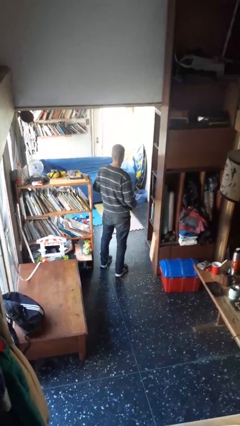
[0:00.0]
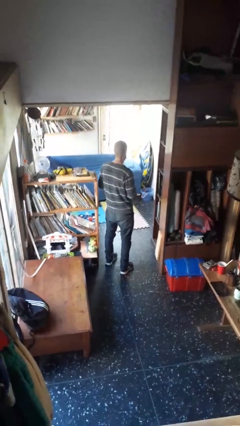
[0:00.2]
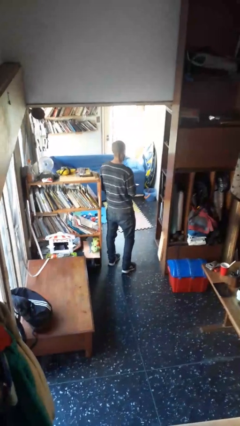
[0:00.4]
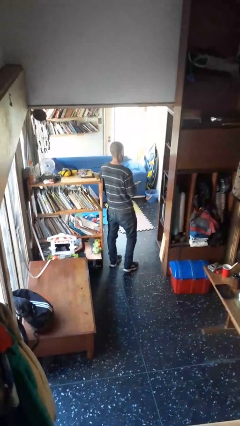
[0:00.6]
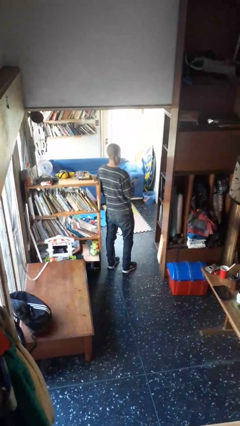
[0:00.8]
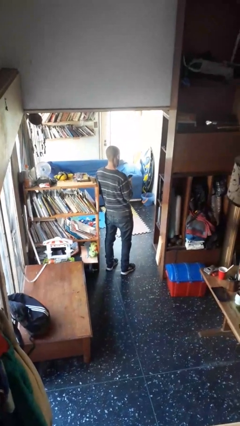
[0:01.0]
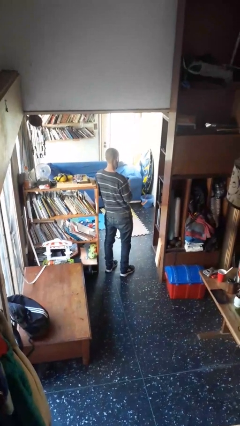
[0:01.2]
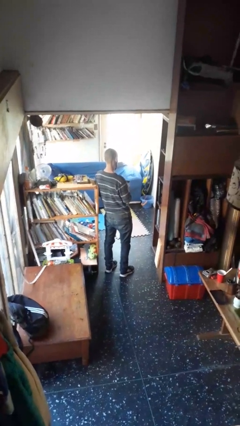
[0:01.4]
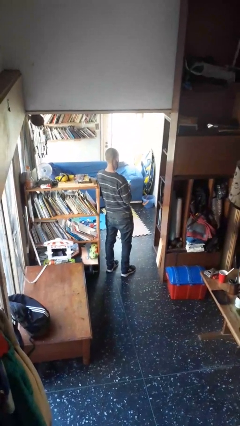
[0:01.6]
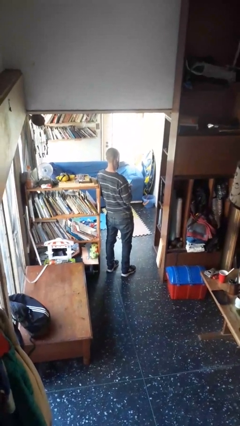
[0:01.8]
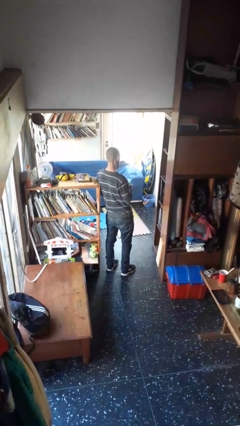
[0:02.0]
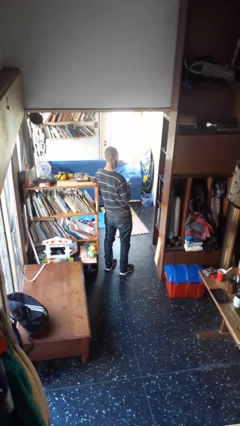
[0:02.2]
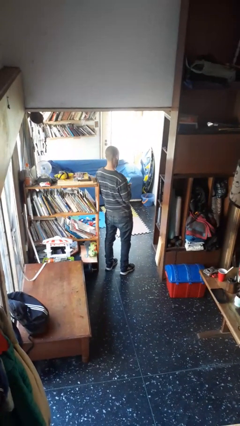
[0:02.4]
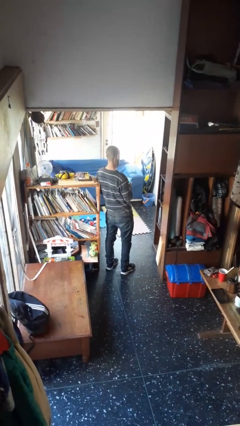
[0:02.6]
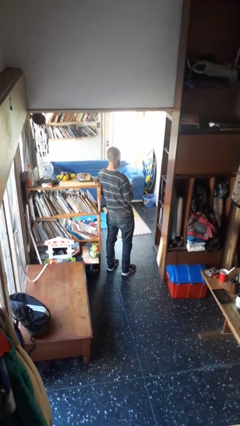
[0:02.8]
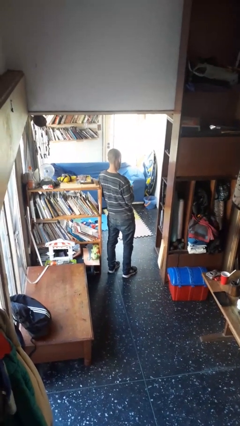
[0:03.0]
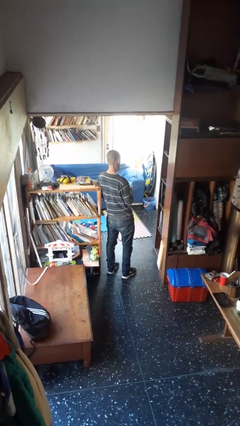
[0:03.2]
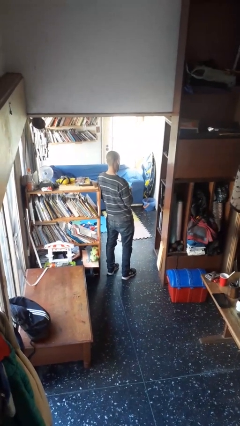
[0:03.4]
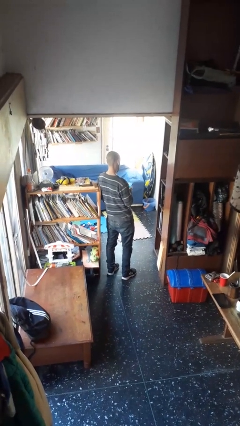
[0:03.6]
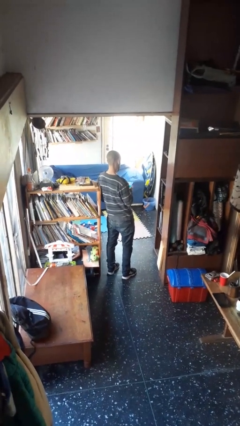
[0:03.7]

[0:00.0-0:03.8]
person takes phone from pocket

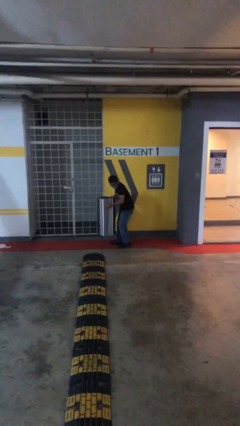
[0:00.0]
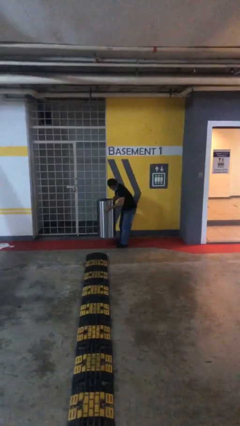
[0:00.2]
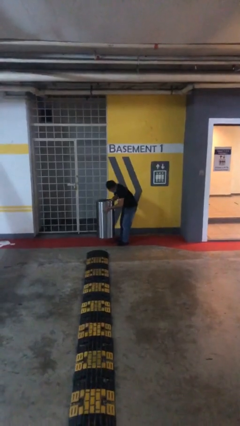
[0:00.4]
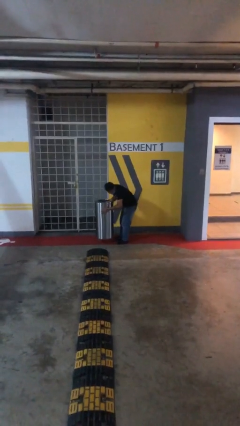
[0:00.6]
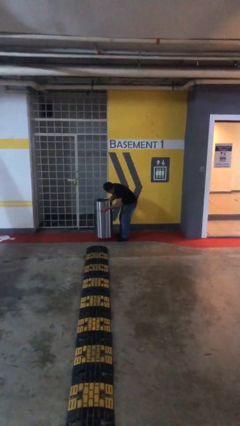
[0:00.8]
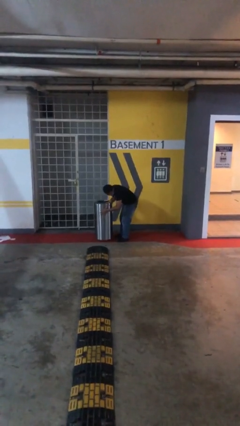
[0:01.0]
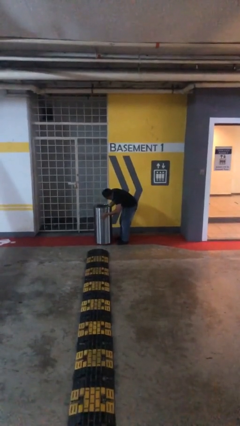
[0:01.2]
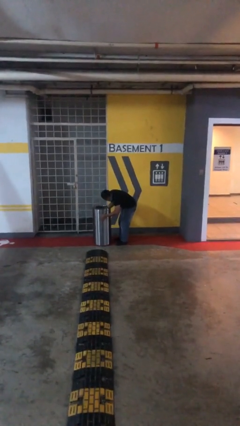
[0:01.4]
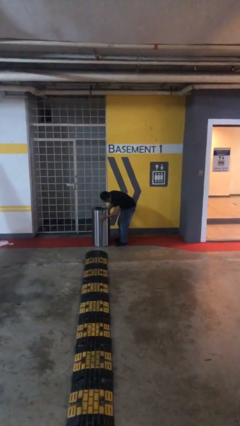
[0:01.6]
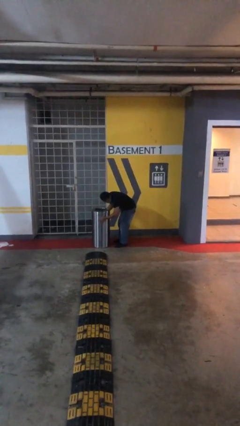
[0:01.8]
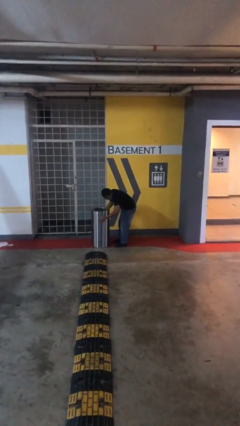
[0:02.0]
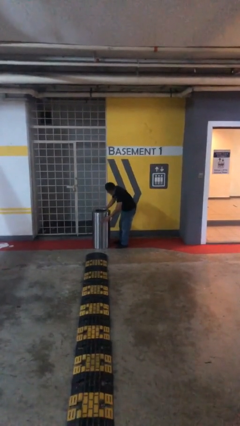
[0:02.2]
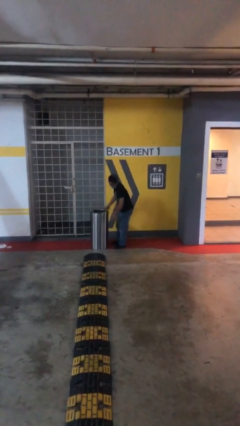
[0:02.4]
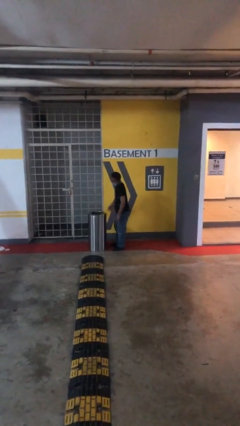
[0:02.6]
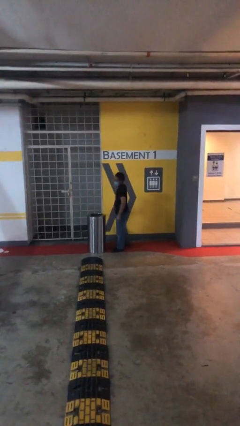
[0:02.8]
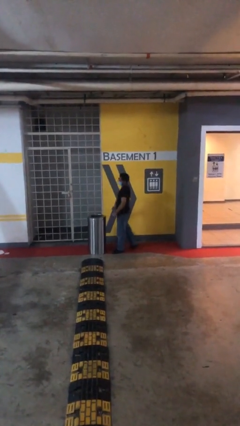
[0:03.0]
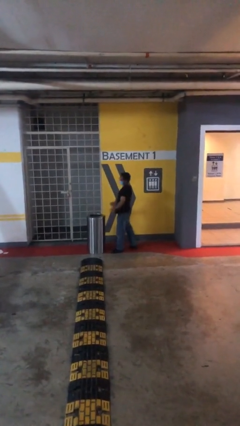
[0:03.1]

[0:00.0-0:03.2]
person puts down object on floor

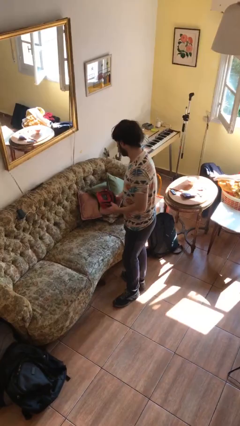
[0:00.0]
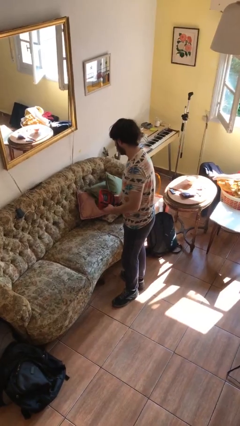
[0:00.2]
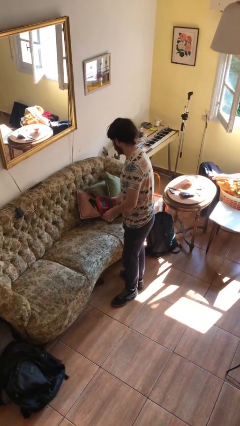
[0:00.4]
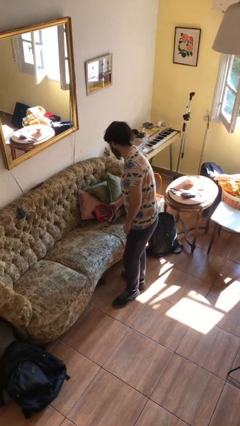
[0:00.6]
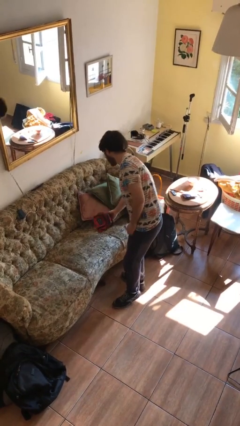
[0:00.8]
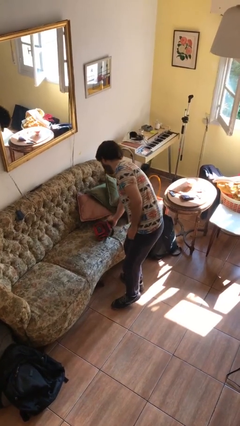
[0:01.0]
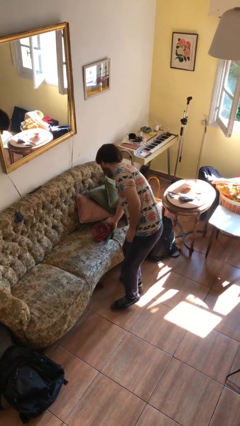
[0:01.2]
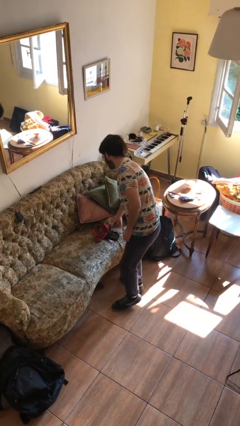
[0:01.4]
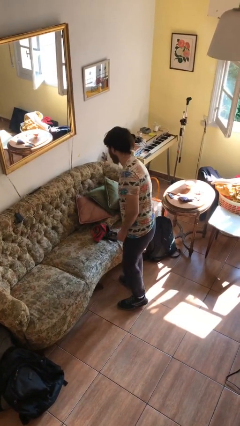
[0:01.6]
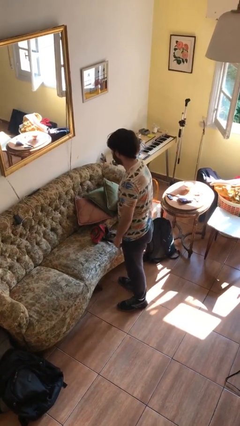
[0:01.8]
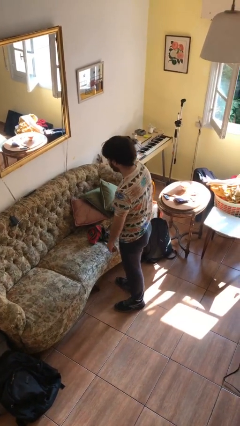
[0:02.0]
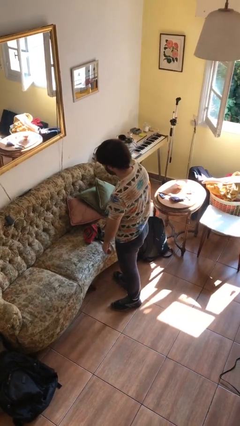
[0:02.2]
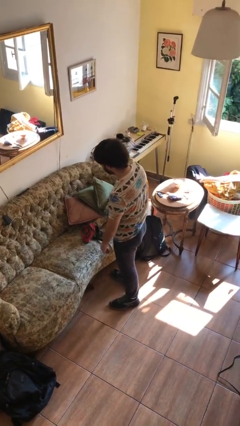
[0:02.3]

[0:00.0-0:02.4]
person puts down object on couch

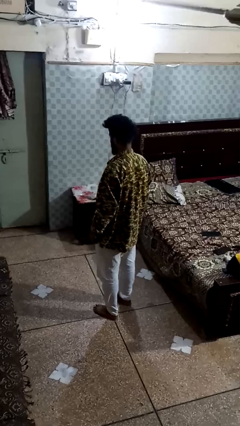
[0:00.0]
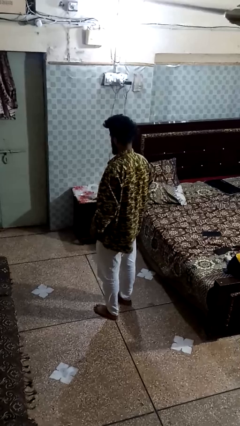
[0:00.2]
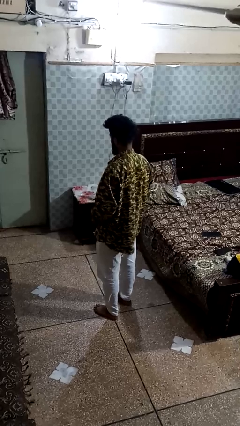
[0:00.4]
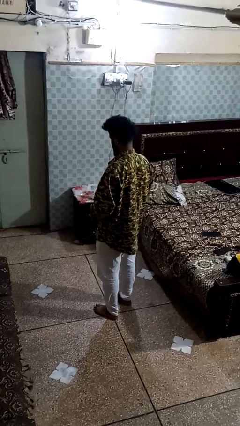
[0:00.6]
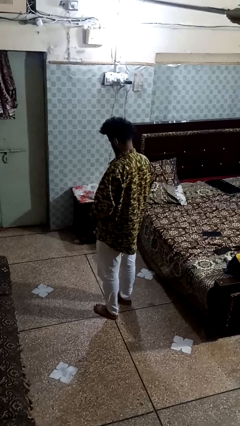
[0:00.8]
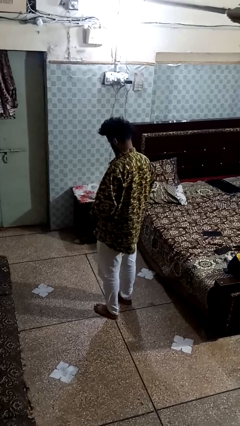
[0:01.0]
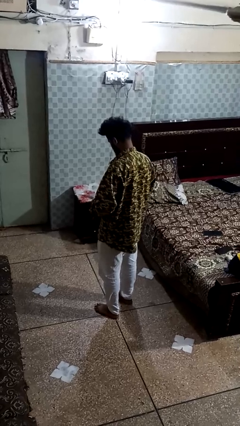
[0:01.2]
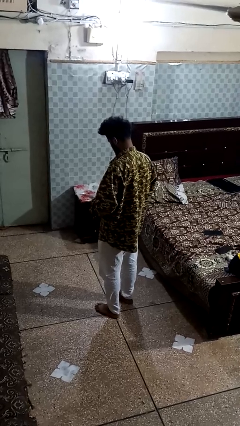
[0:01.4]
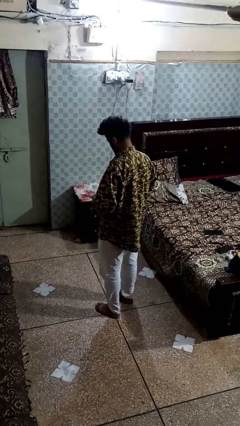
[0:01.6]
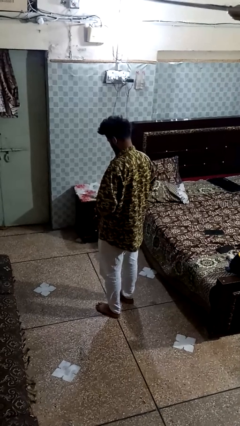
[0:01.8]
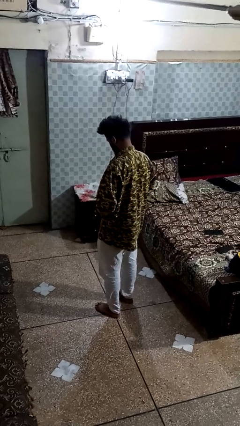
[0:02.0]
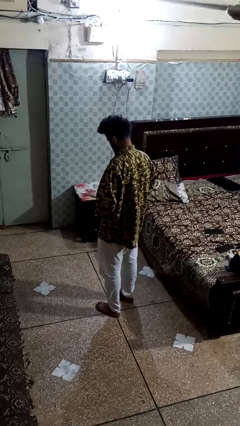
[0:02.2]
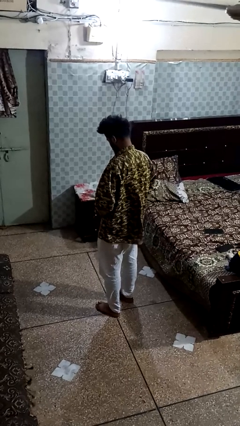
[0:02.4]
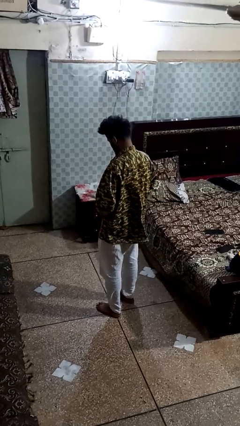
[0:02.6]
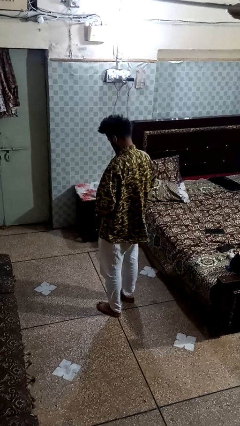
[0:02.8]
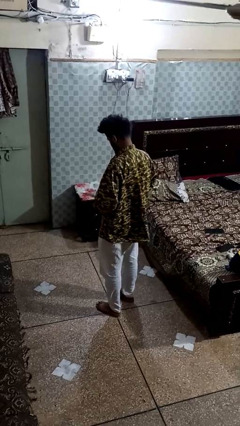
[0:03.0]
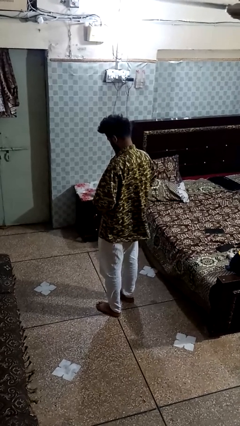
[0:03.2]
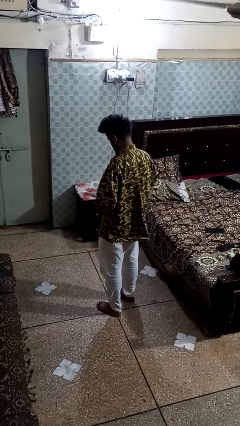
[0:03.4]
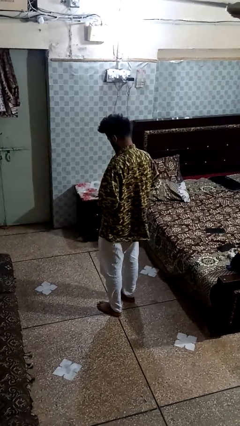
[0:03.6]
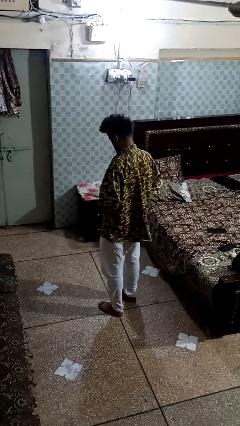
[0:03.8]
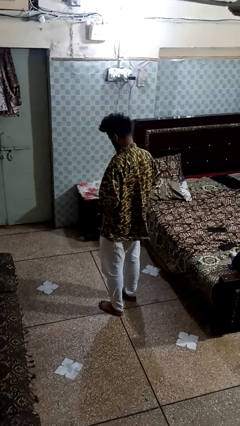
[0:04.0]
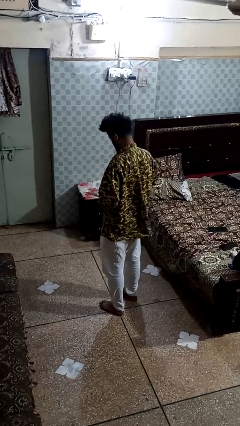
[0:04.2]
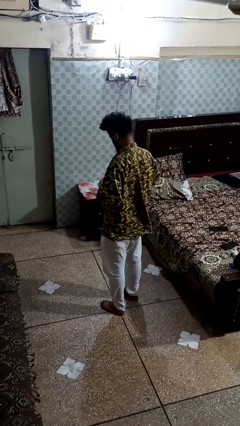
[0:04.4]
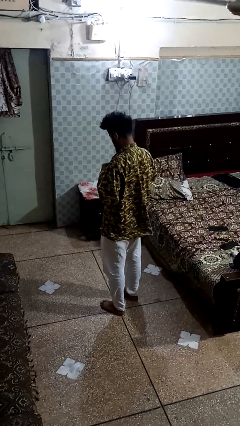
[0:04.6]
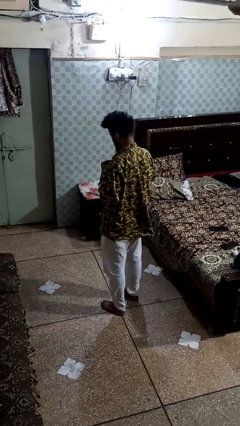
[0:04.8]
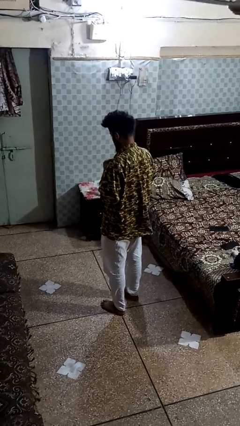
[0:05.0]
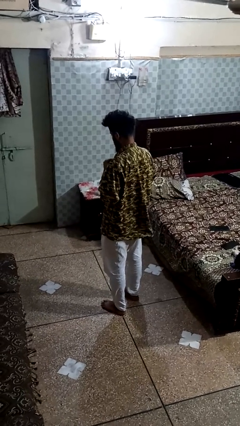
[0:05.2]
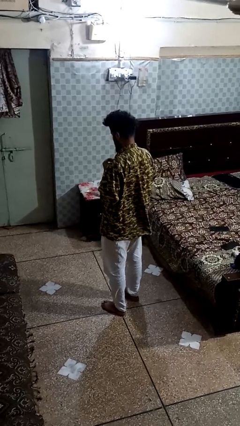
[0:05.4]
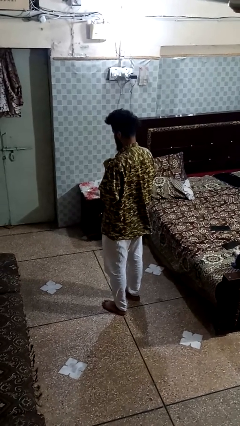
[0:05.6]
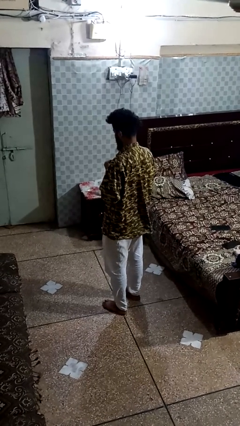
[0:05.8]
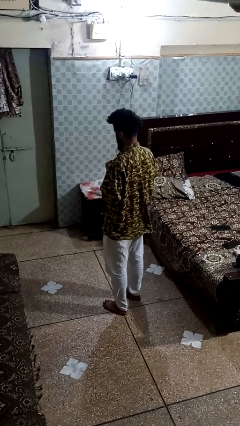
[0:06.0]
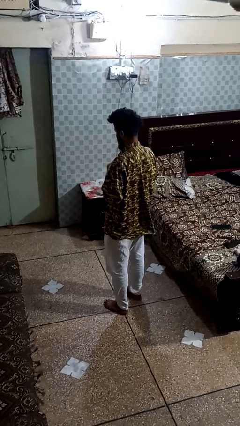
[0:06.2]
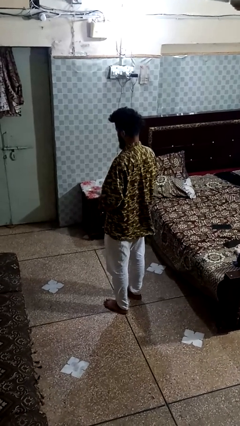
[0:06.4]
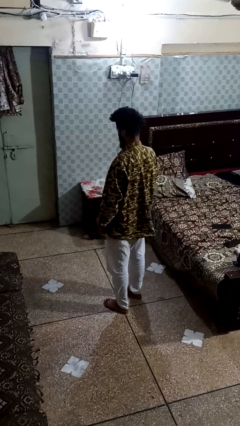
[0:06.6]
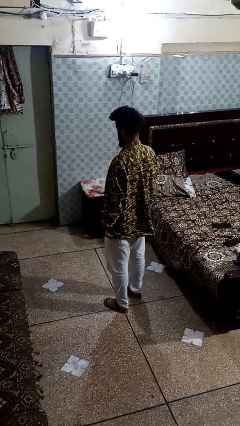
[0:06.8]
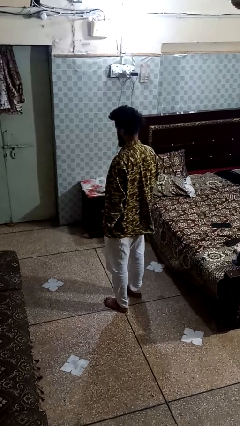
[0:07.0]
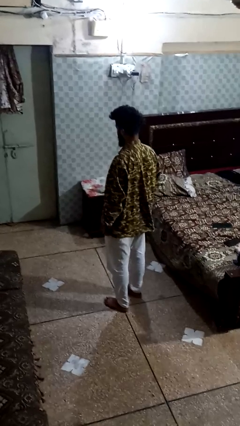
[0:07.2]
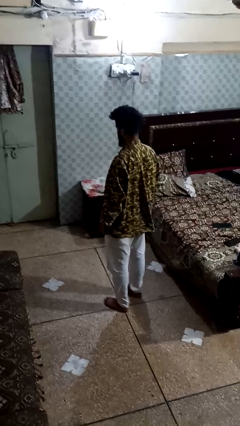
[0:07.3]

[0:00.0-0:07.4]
person buttons shirt

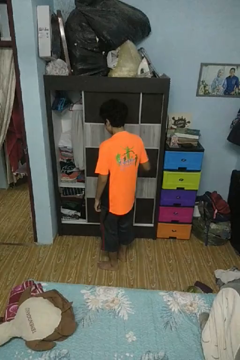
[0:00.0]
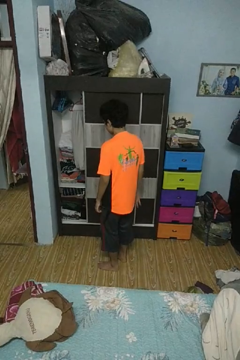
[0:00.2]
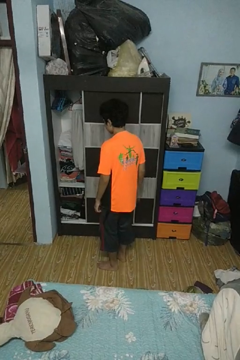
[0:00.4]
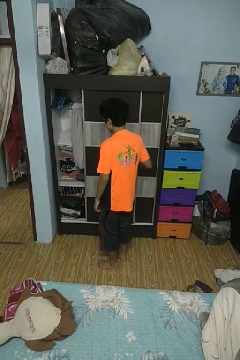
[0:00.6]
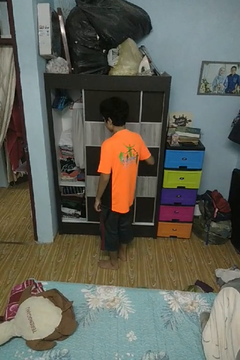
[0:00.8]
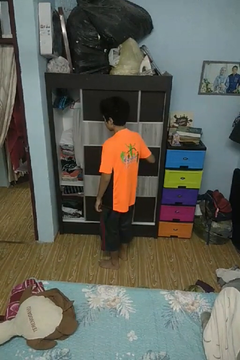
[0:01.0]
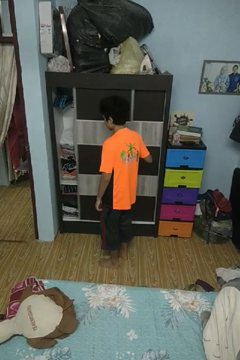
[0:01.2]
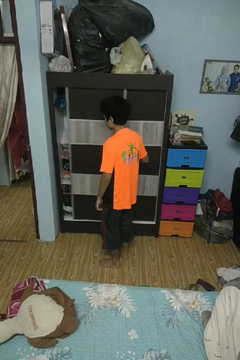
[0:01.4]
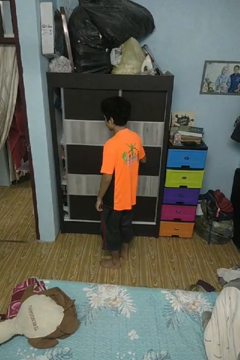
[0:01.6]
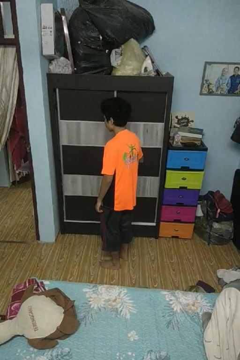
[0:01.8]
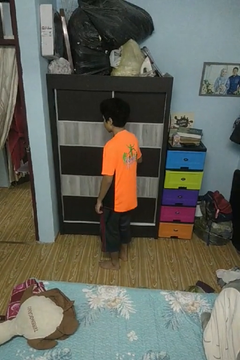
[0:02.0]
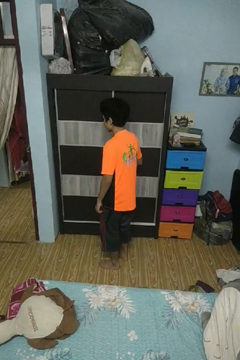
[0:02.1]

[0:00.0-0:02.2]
person closes closet door
